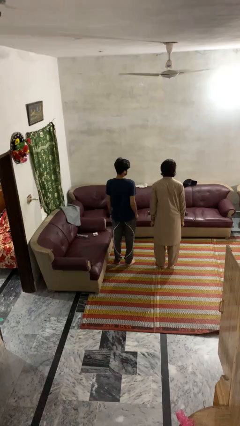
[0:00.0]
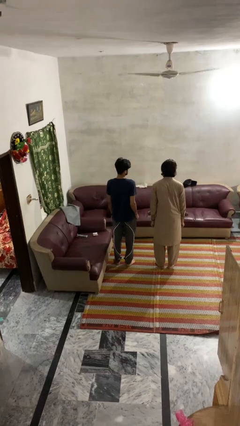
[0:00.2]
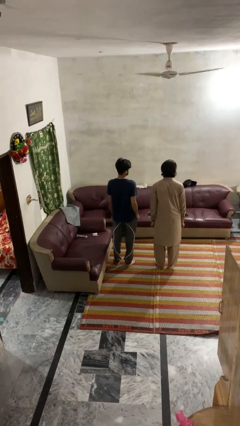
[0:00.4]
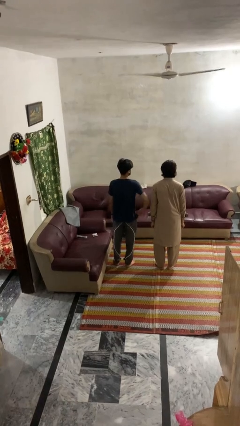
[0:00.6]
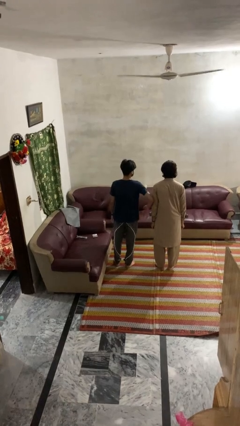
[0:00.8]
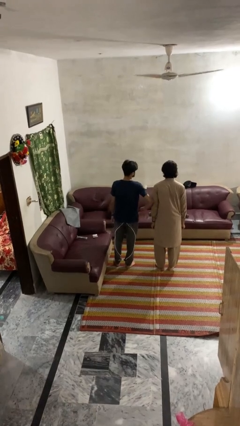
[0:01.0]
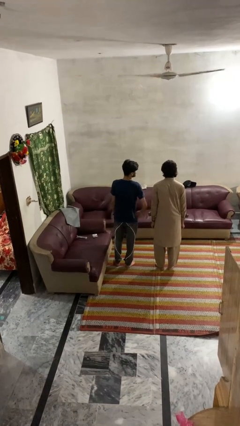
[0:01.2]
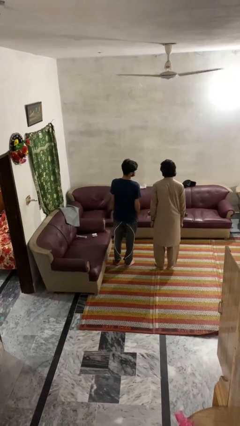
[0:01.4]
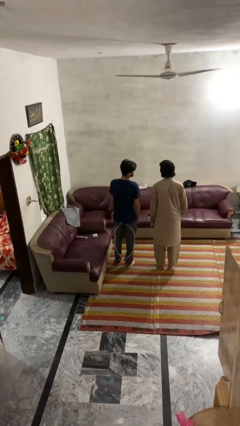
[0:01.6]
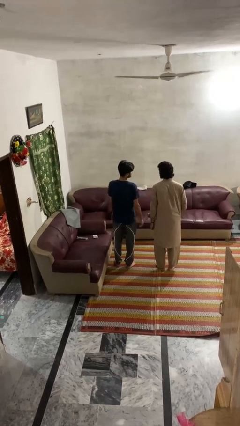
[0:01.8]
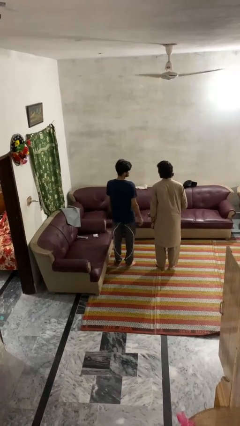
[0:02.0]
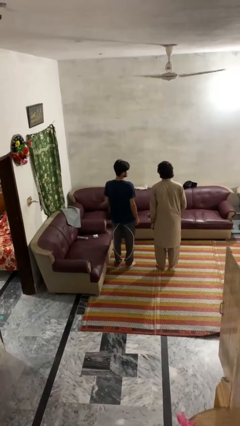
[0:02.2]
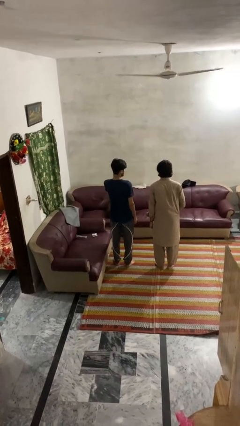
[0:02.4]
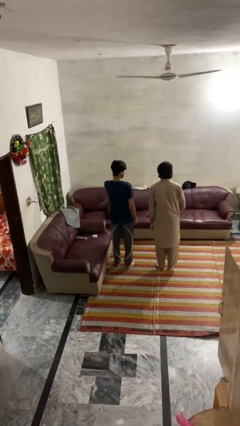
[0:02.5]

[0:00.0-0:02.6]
person nudges person with elbow

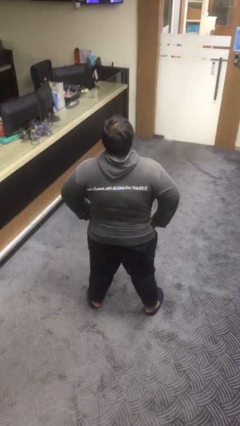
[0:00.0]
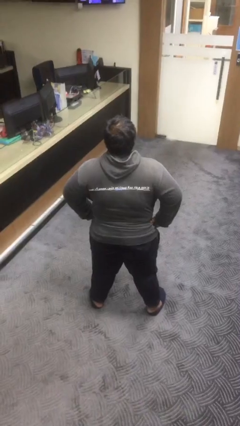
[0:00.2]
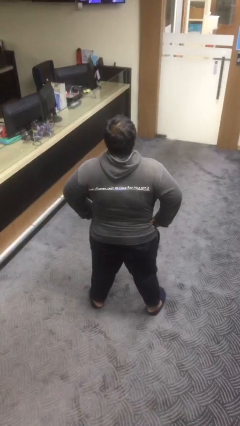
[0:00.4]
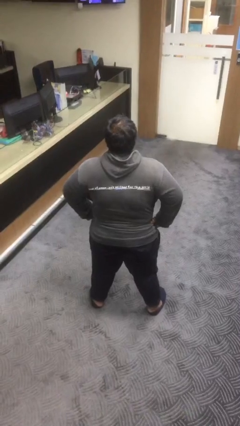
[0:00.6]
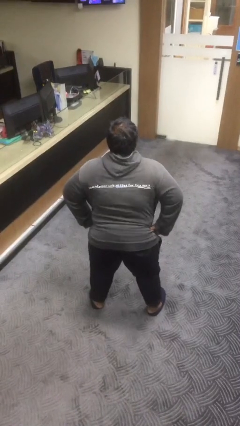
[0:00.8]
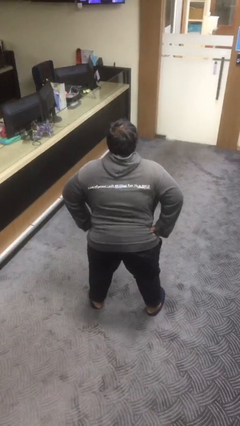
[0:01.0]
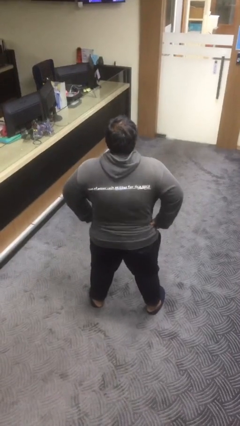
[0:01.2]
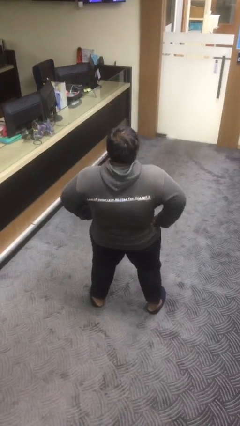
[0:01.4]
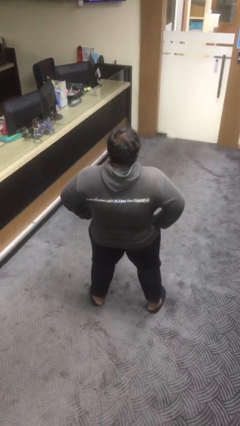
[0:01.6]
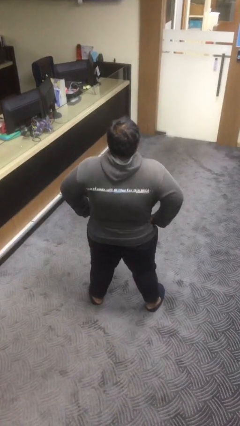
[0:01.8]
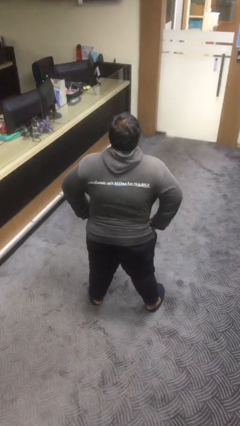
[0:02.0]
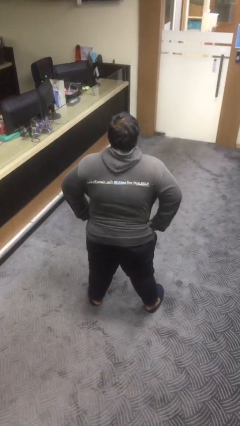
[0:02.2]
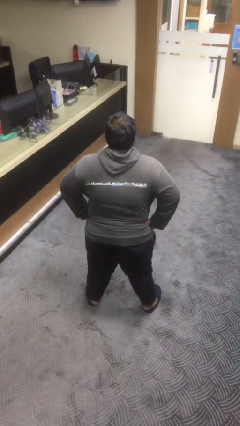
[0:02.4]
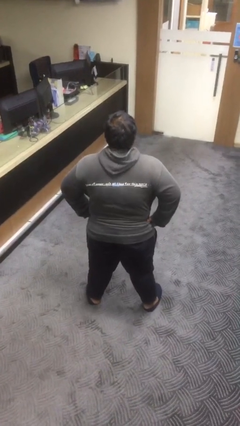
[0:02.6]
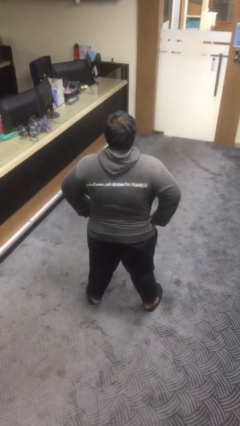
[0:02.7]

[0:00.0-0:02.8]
person wiggles hips

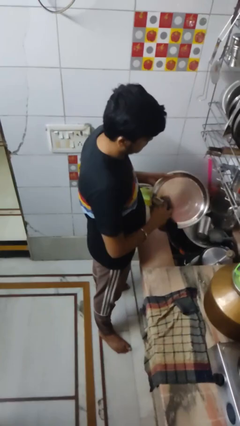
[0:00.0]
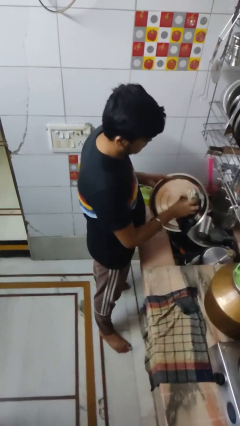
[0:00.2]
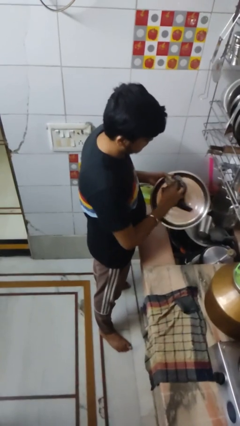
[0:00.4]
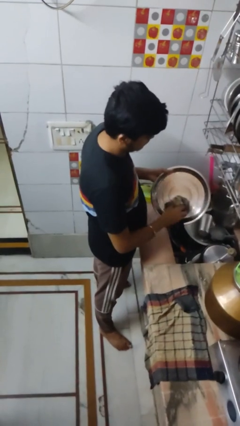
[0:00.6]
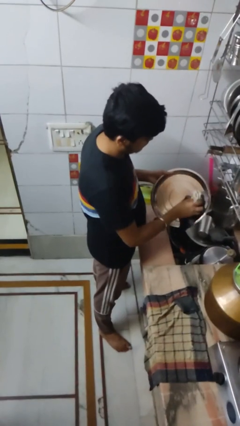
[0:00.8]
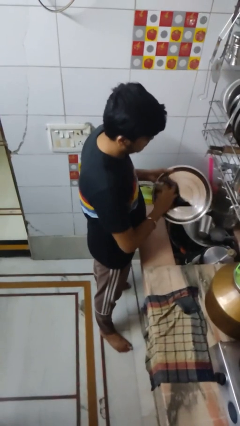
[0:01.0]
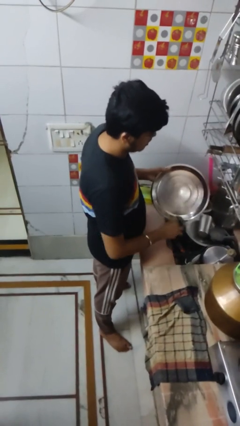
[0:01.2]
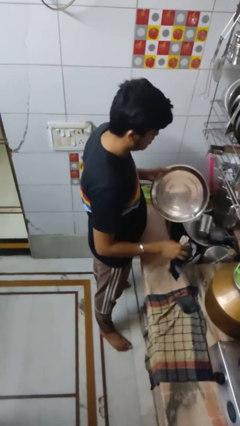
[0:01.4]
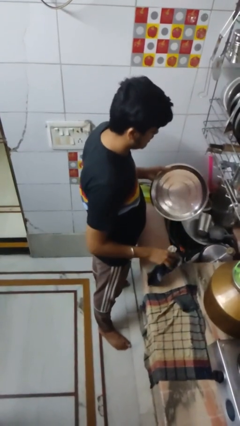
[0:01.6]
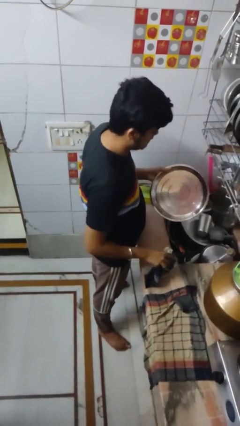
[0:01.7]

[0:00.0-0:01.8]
person dries dish

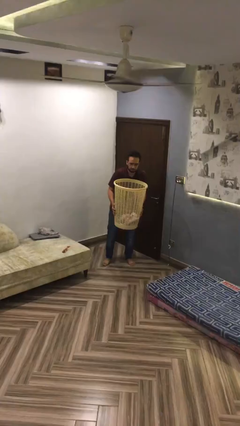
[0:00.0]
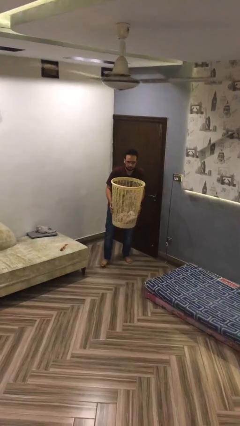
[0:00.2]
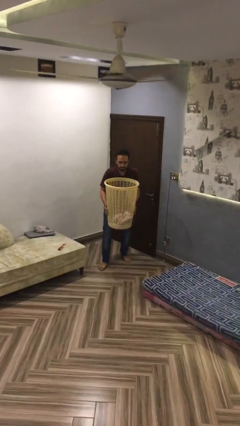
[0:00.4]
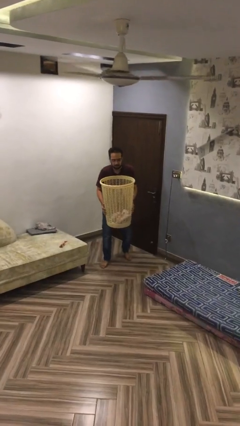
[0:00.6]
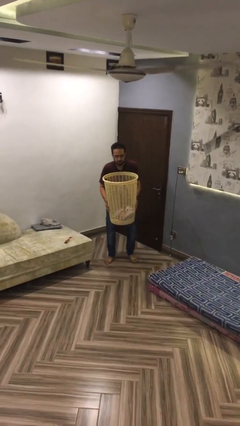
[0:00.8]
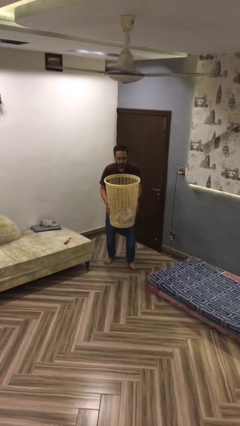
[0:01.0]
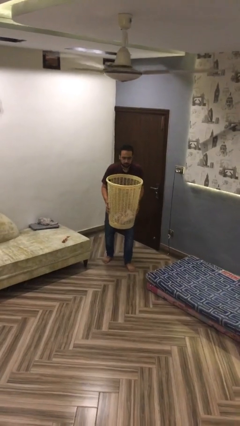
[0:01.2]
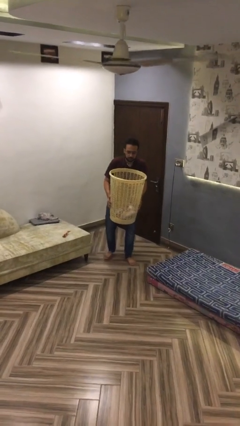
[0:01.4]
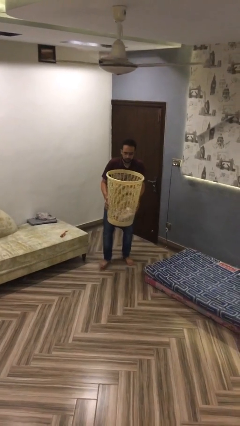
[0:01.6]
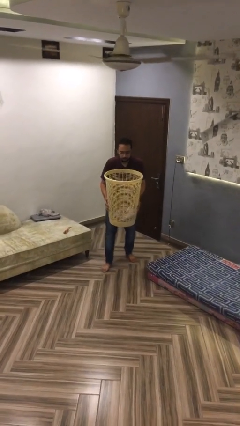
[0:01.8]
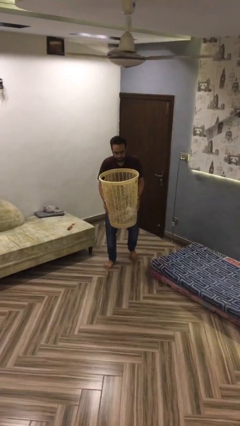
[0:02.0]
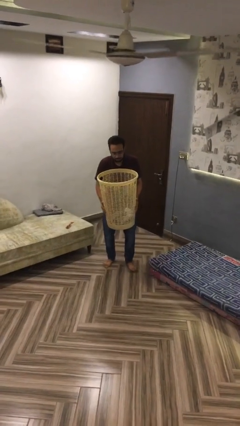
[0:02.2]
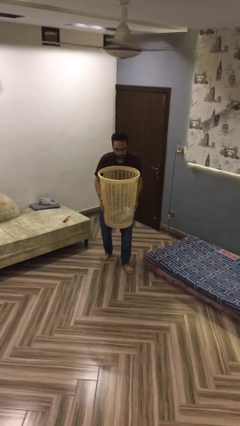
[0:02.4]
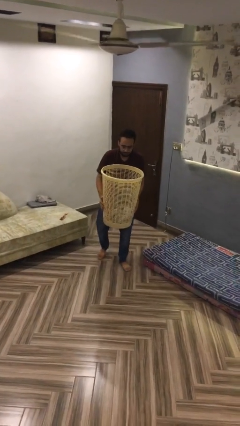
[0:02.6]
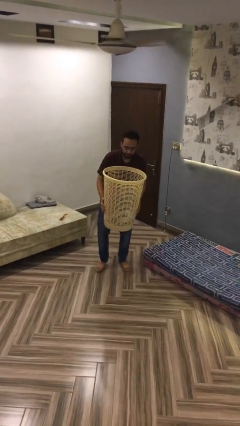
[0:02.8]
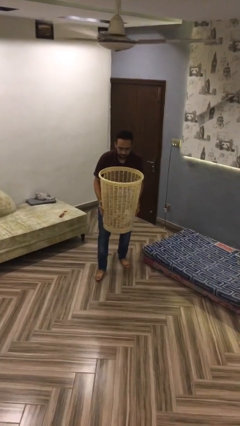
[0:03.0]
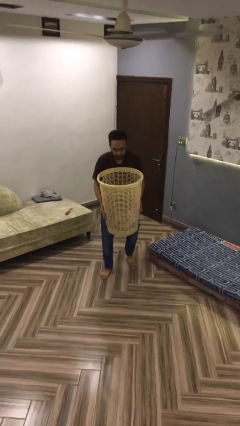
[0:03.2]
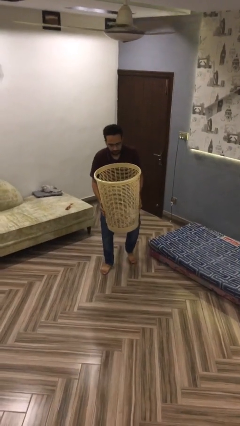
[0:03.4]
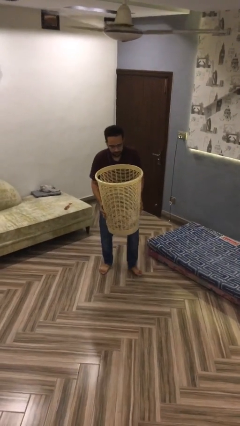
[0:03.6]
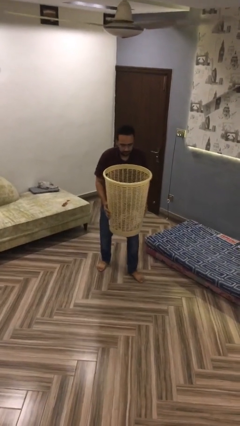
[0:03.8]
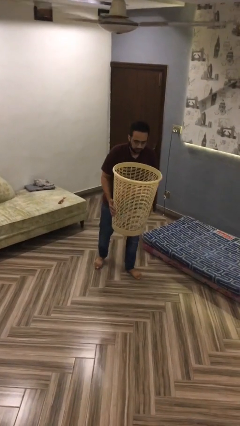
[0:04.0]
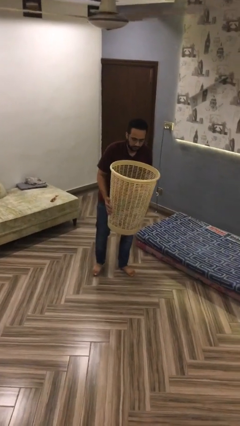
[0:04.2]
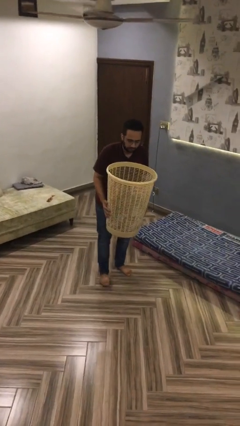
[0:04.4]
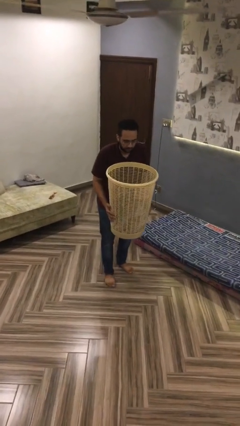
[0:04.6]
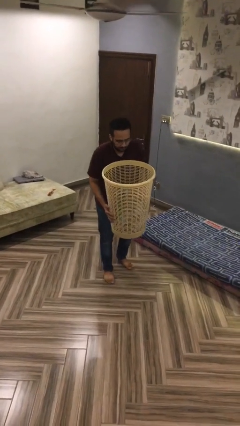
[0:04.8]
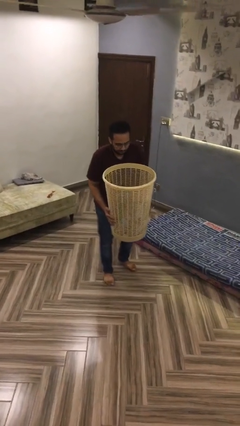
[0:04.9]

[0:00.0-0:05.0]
person carries heavy object

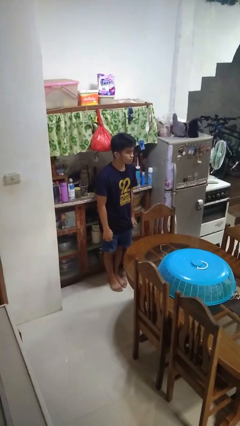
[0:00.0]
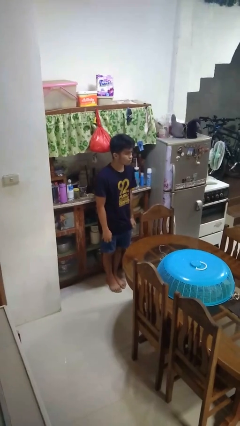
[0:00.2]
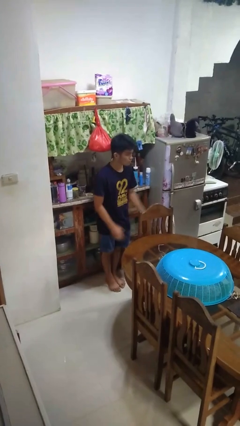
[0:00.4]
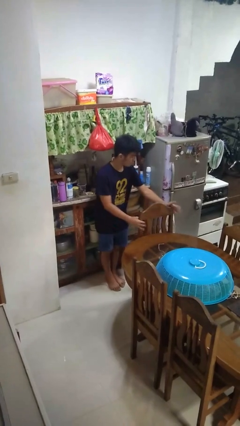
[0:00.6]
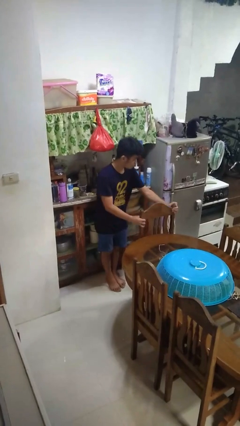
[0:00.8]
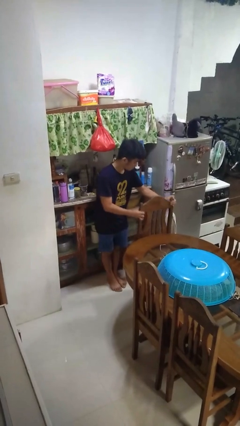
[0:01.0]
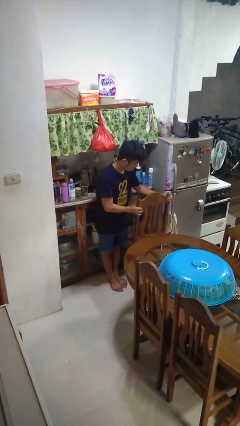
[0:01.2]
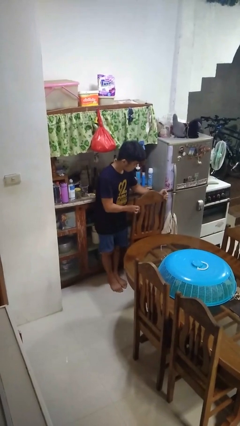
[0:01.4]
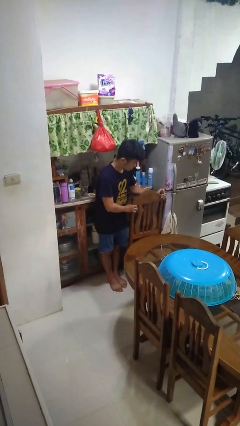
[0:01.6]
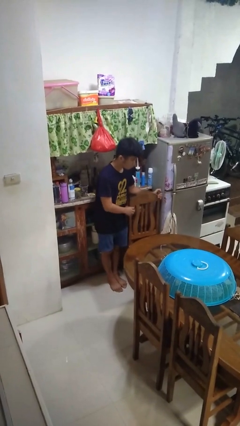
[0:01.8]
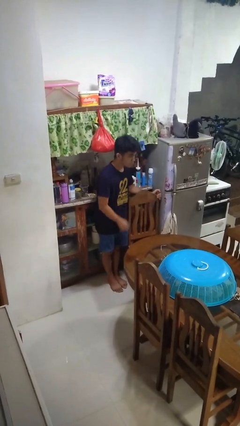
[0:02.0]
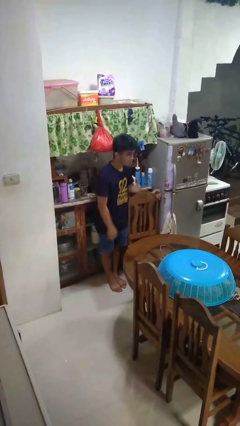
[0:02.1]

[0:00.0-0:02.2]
person pulls out chair

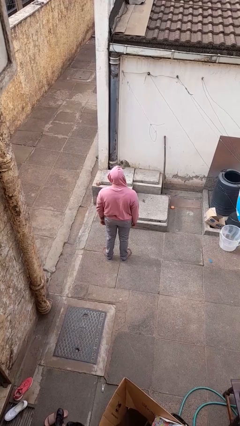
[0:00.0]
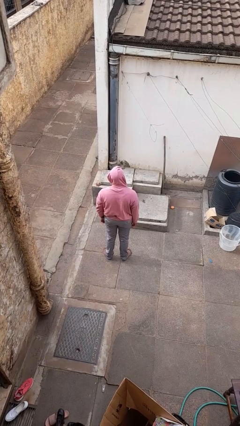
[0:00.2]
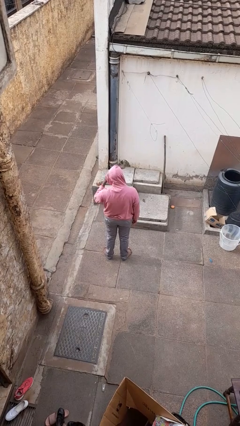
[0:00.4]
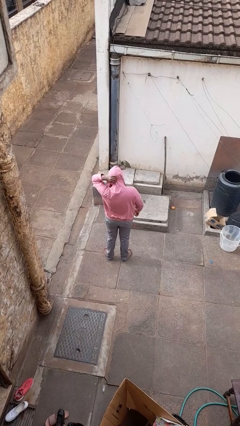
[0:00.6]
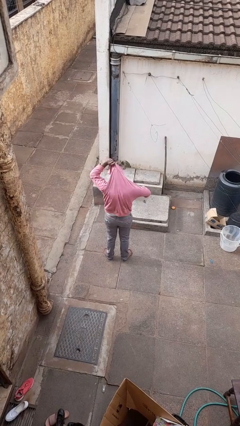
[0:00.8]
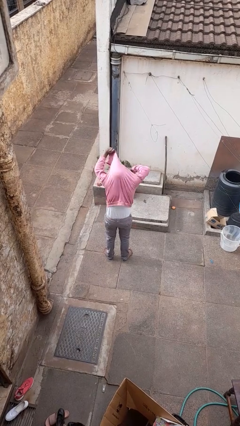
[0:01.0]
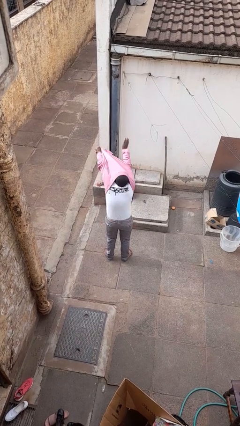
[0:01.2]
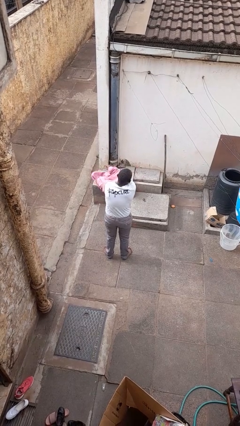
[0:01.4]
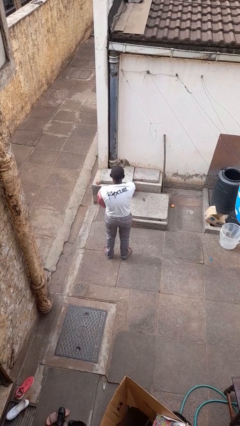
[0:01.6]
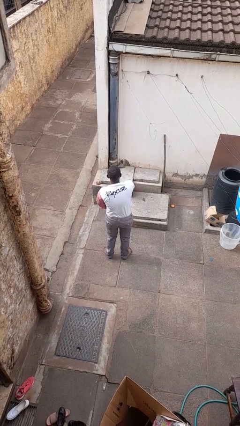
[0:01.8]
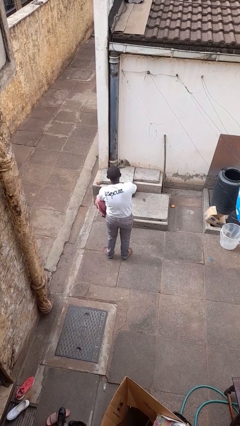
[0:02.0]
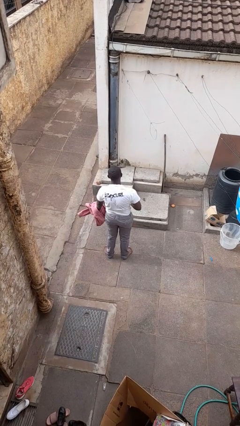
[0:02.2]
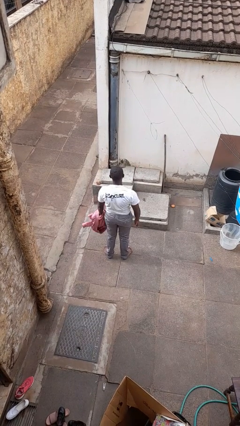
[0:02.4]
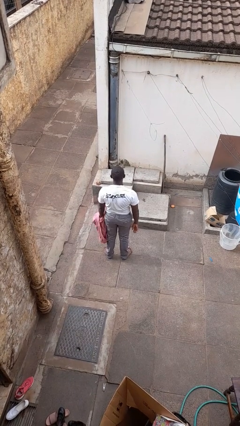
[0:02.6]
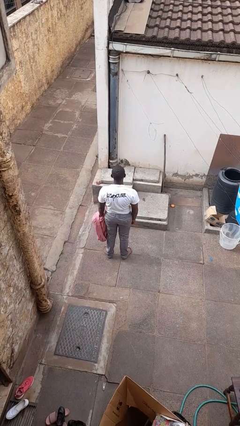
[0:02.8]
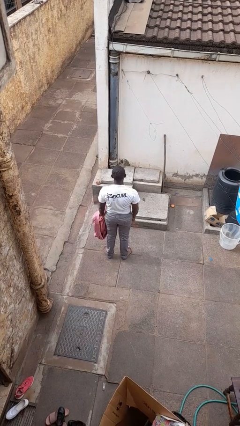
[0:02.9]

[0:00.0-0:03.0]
person takes off hoodie
